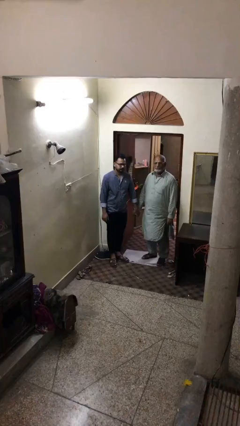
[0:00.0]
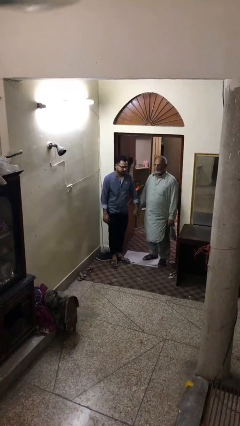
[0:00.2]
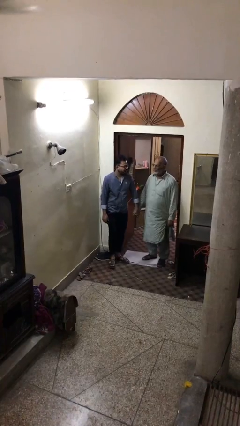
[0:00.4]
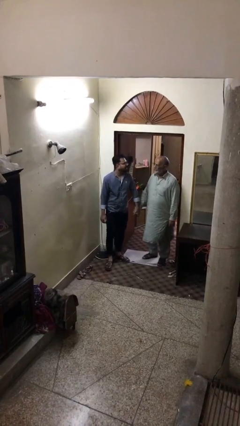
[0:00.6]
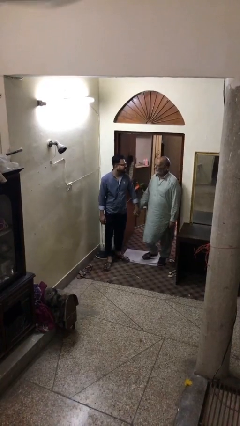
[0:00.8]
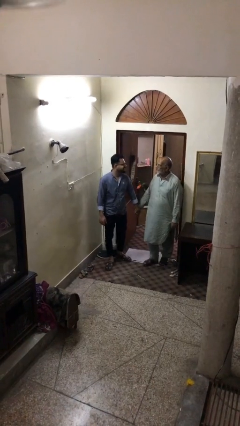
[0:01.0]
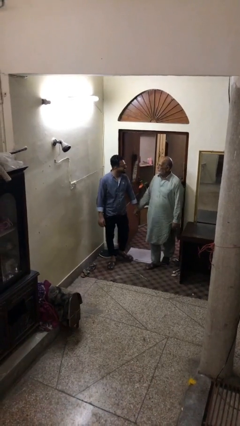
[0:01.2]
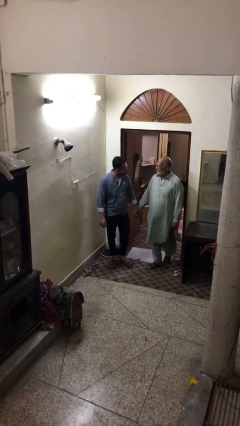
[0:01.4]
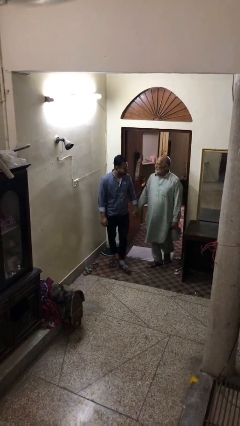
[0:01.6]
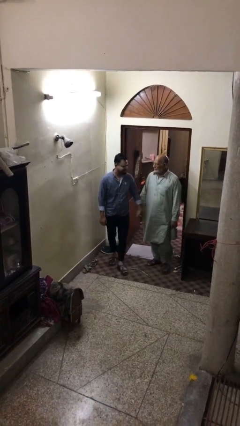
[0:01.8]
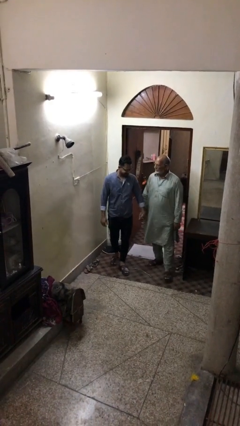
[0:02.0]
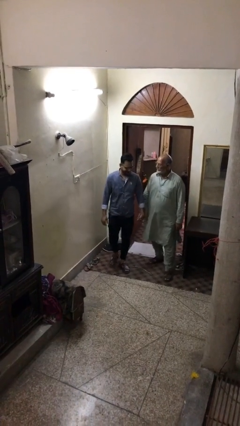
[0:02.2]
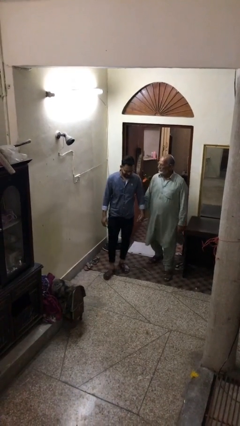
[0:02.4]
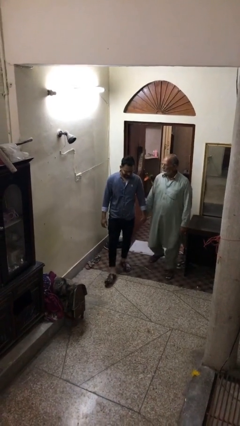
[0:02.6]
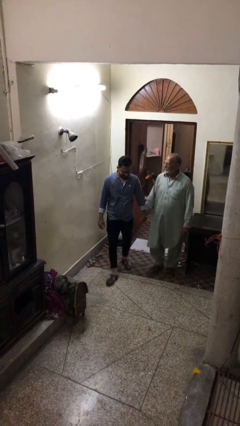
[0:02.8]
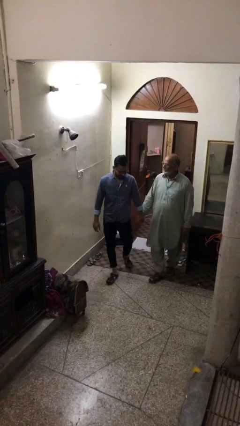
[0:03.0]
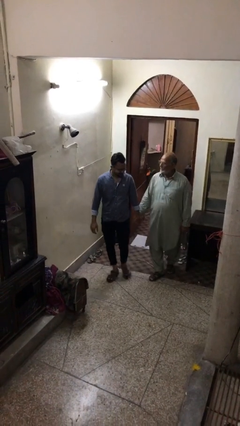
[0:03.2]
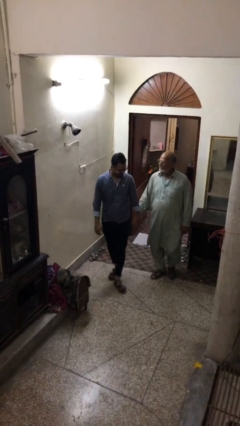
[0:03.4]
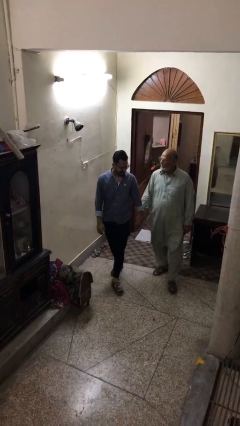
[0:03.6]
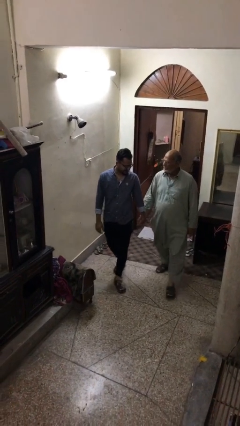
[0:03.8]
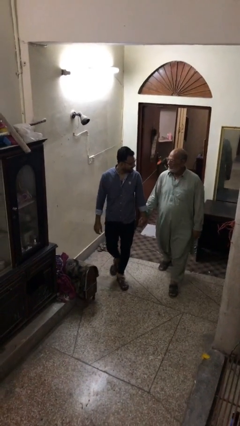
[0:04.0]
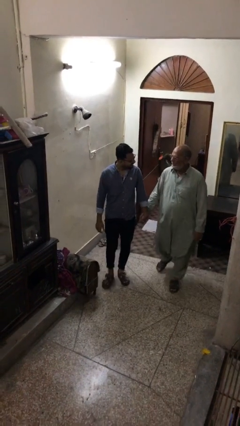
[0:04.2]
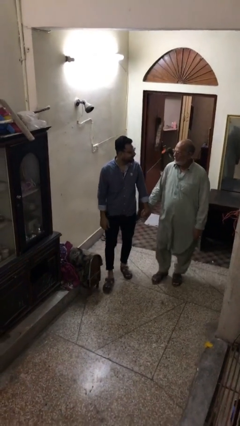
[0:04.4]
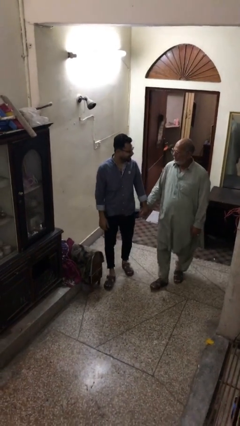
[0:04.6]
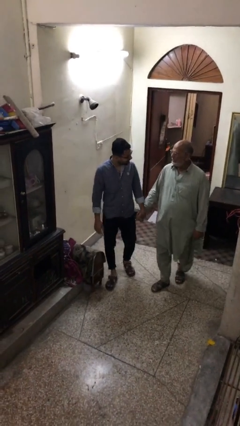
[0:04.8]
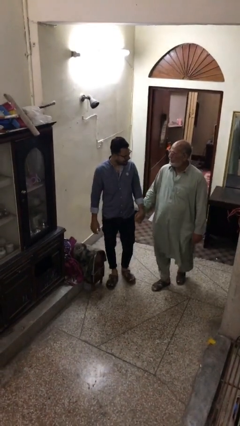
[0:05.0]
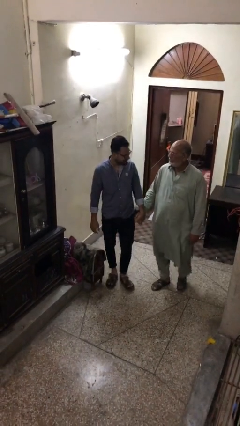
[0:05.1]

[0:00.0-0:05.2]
person holds hand

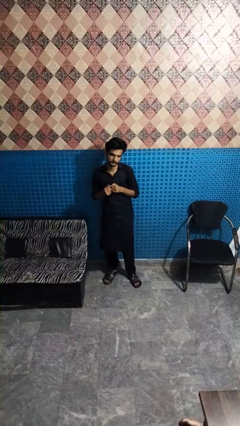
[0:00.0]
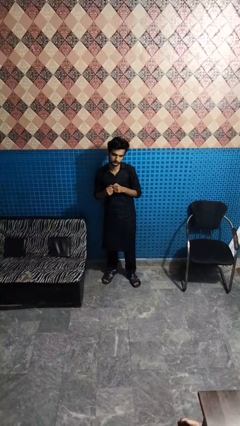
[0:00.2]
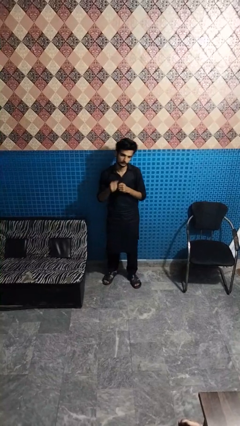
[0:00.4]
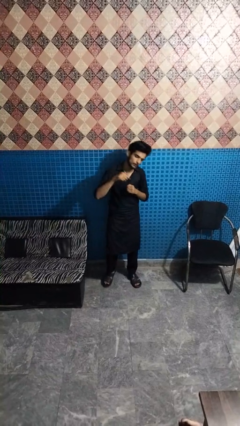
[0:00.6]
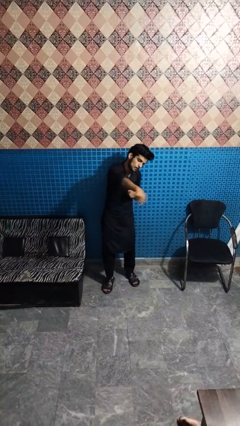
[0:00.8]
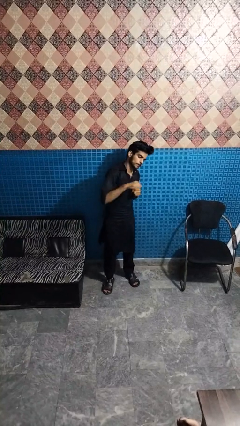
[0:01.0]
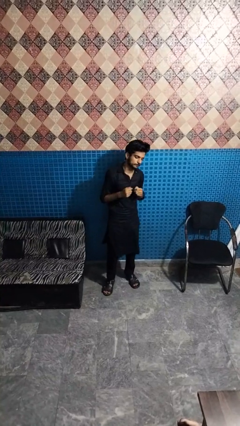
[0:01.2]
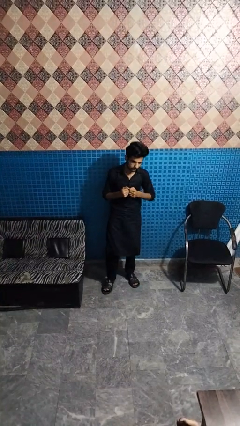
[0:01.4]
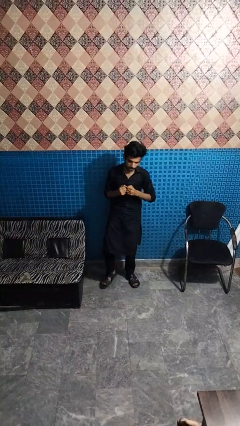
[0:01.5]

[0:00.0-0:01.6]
person punches

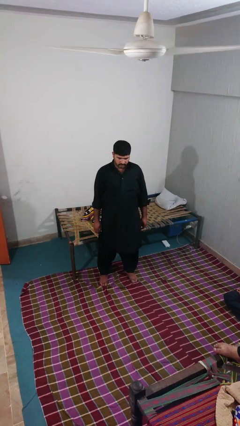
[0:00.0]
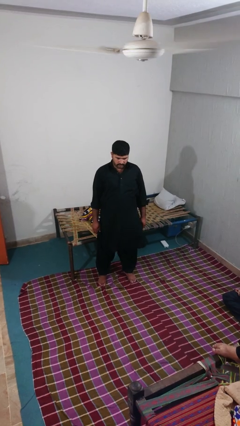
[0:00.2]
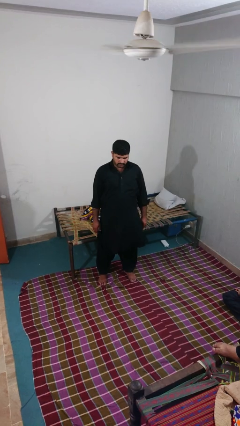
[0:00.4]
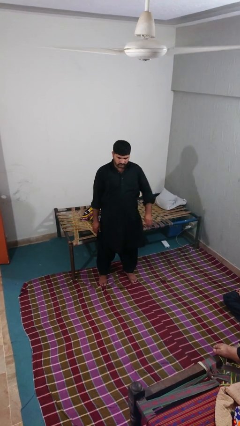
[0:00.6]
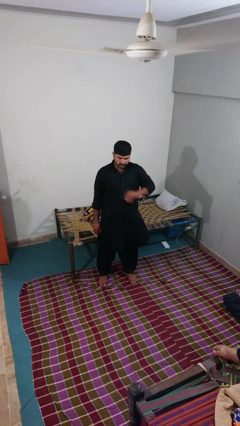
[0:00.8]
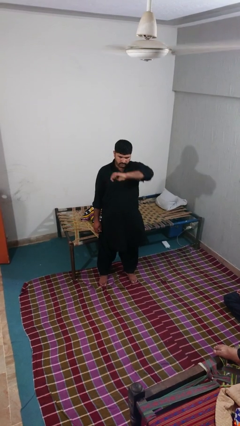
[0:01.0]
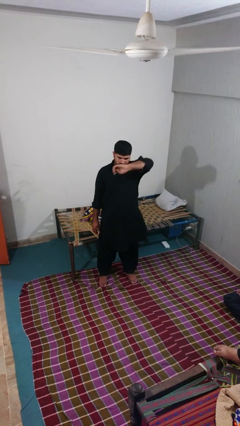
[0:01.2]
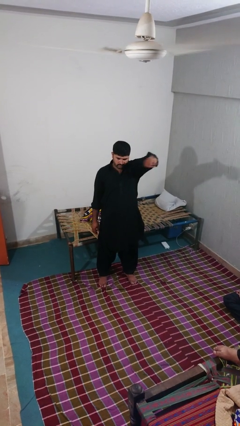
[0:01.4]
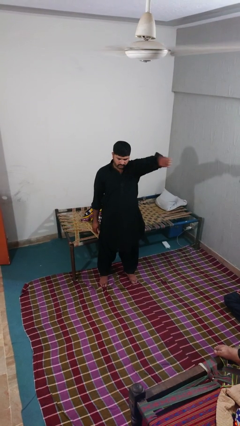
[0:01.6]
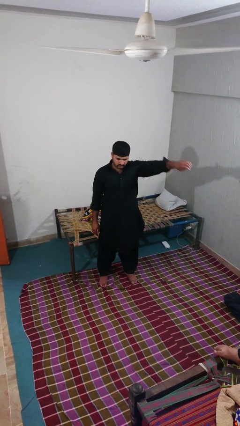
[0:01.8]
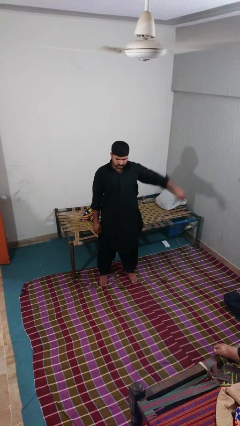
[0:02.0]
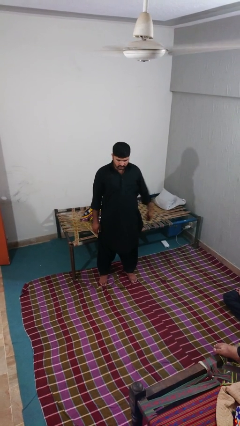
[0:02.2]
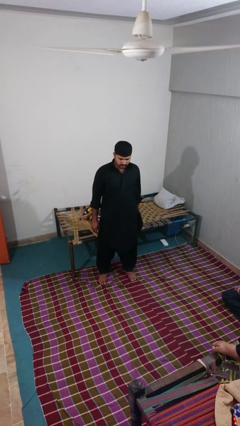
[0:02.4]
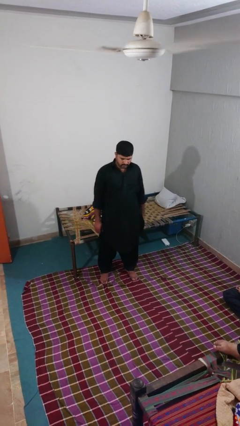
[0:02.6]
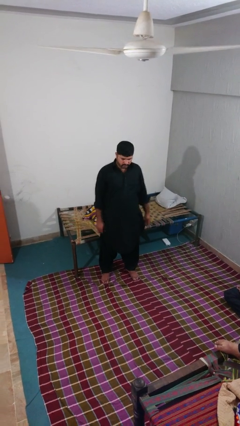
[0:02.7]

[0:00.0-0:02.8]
person gestures swipe left

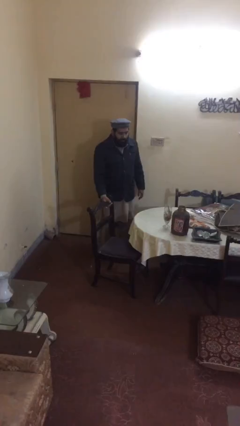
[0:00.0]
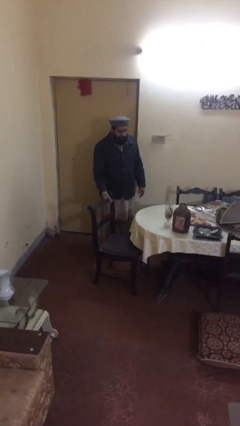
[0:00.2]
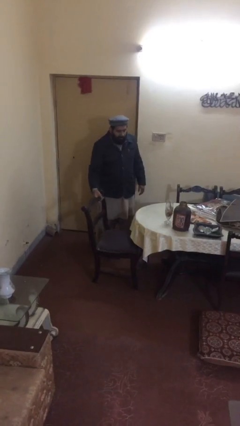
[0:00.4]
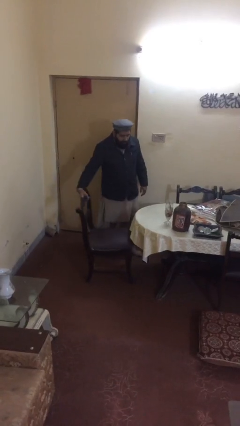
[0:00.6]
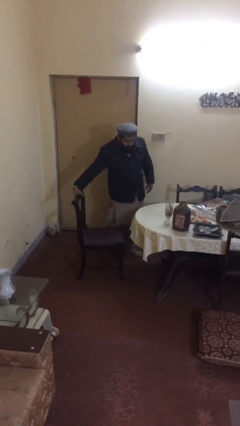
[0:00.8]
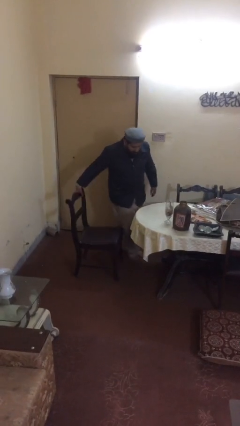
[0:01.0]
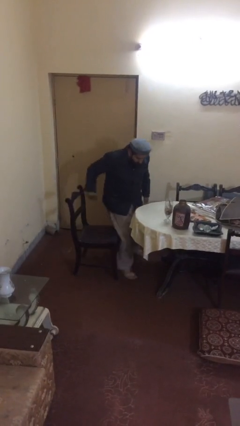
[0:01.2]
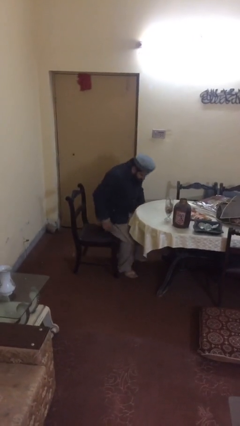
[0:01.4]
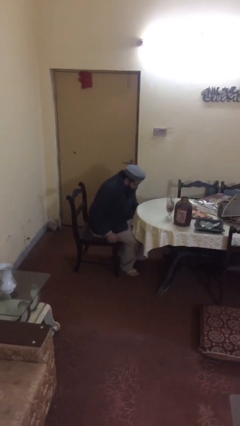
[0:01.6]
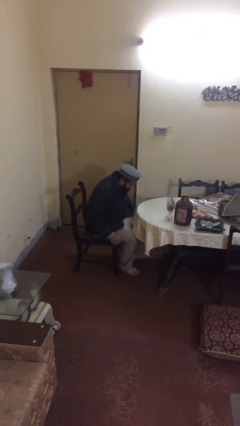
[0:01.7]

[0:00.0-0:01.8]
person sits down

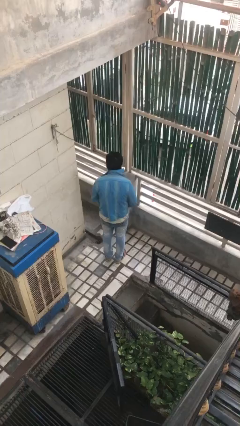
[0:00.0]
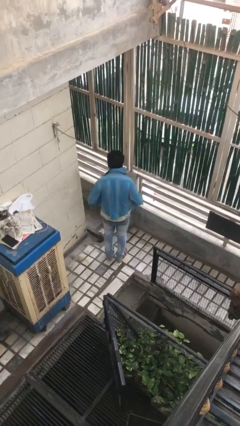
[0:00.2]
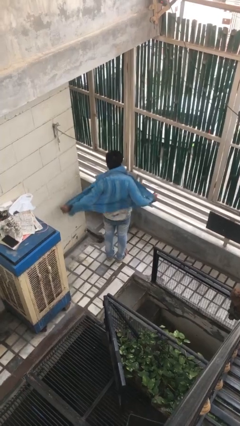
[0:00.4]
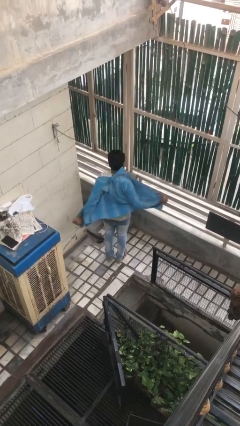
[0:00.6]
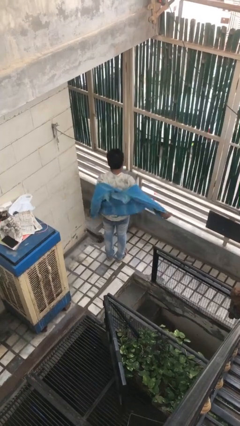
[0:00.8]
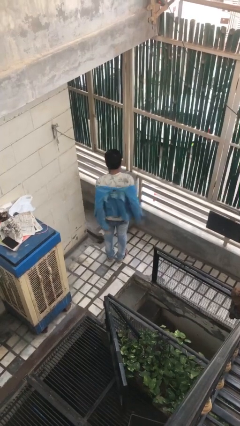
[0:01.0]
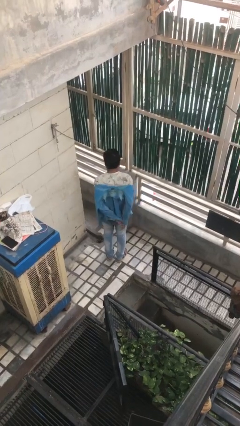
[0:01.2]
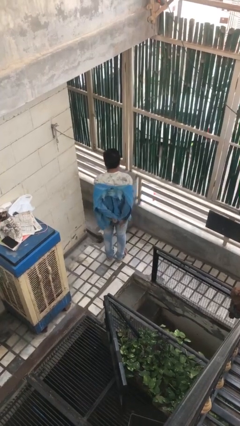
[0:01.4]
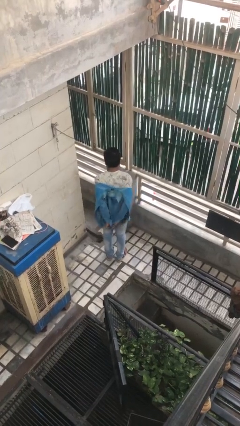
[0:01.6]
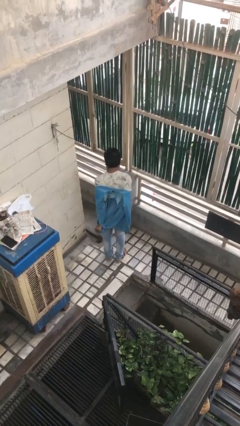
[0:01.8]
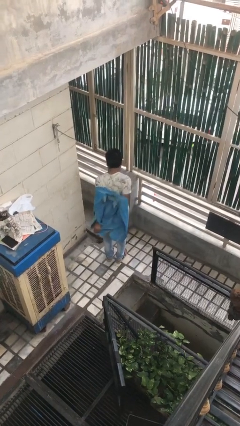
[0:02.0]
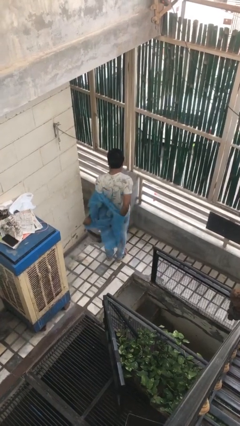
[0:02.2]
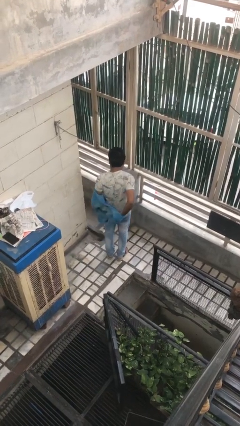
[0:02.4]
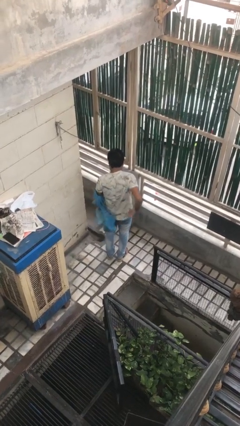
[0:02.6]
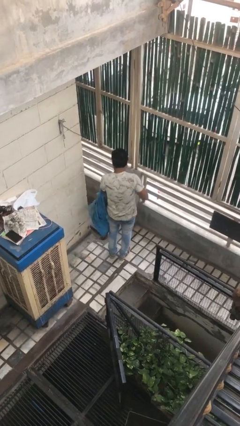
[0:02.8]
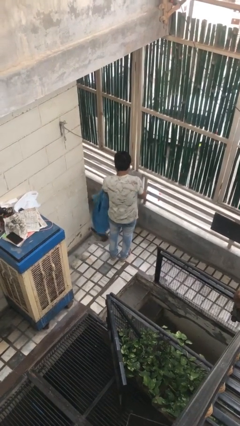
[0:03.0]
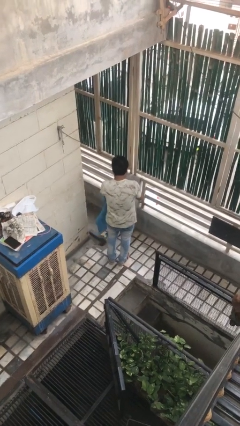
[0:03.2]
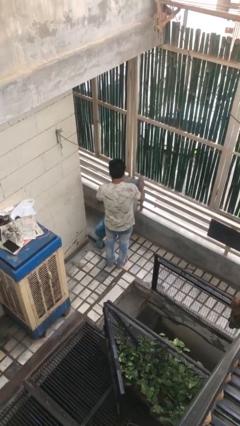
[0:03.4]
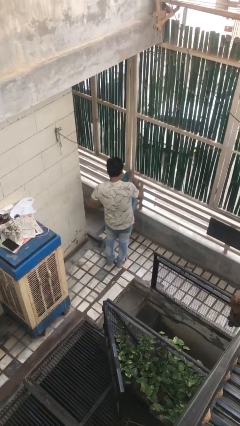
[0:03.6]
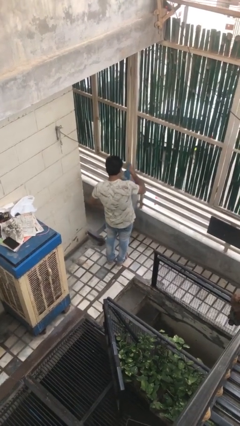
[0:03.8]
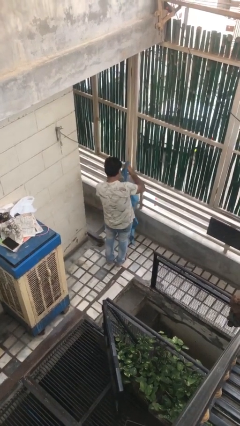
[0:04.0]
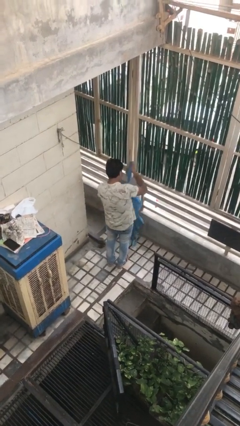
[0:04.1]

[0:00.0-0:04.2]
person takes off shirt

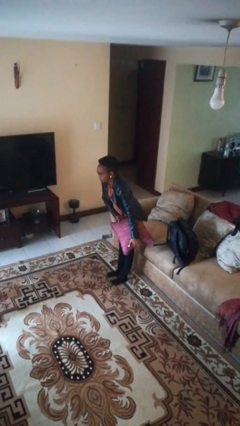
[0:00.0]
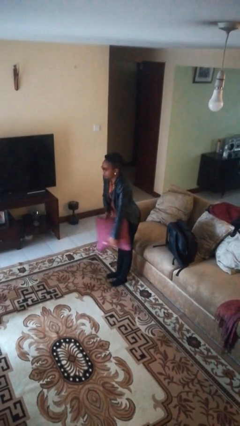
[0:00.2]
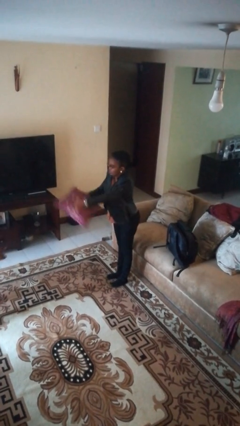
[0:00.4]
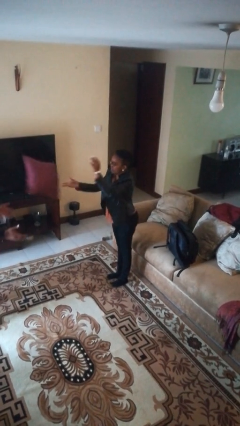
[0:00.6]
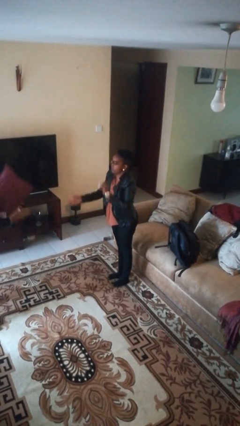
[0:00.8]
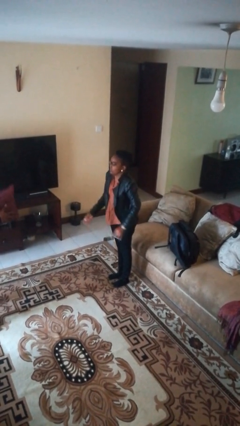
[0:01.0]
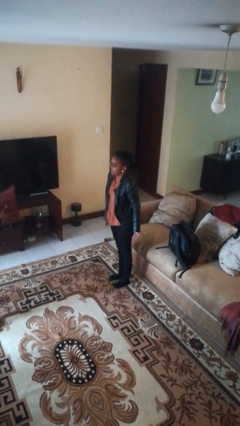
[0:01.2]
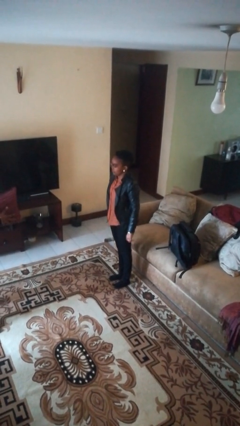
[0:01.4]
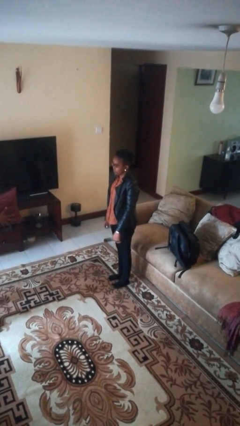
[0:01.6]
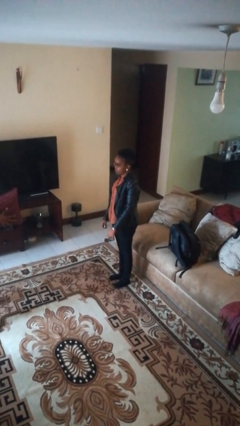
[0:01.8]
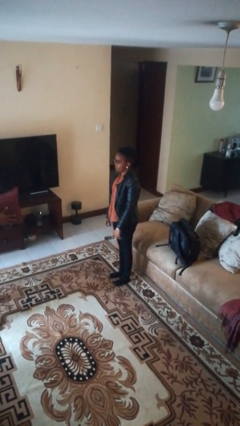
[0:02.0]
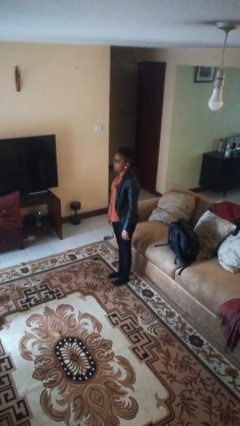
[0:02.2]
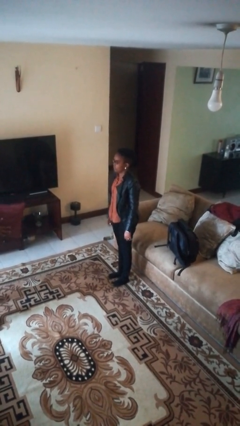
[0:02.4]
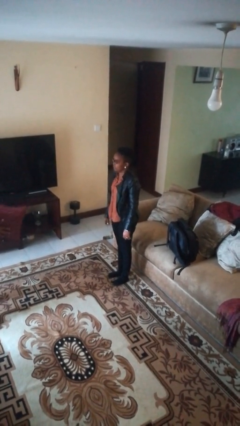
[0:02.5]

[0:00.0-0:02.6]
person throws object to person
